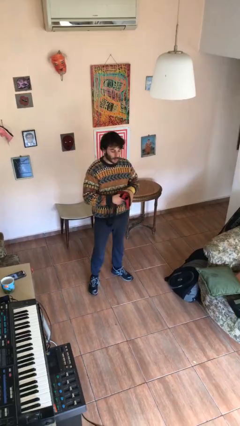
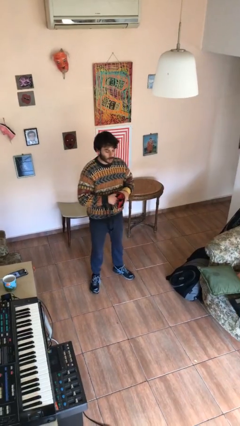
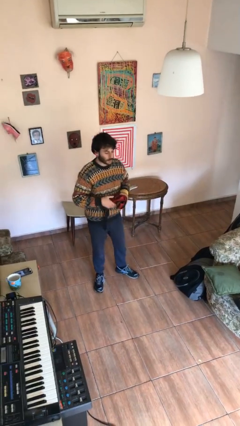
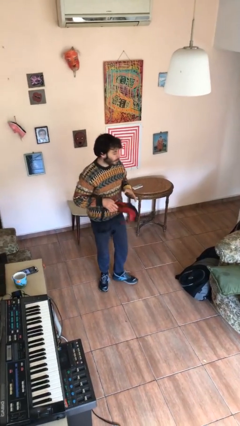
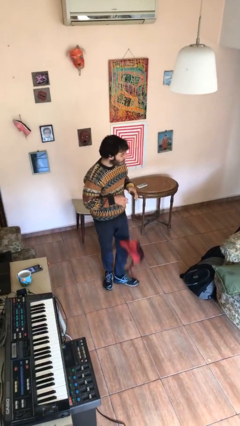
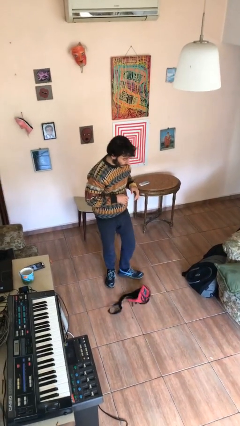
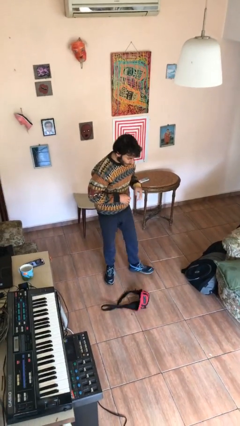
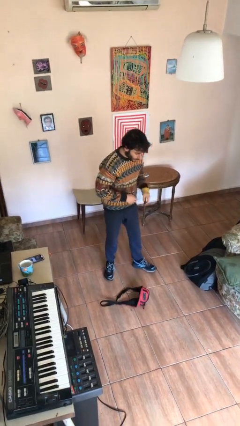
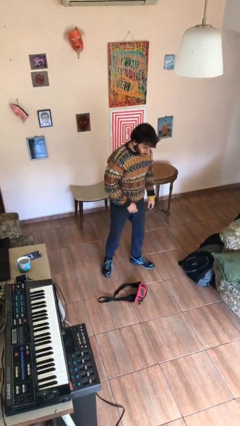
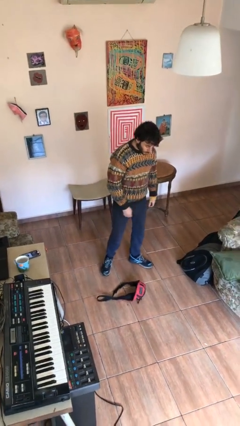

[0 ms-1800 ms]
person drops object

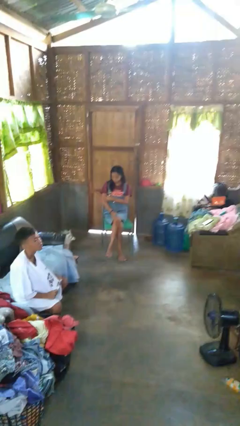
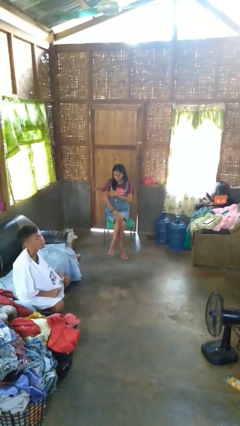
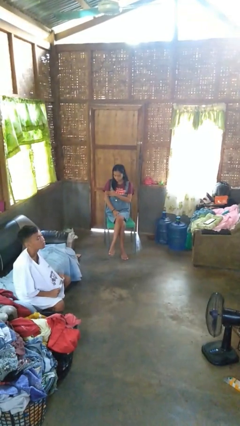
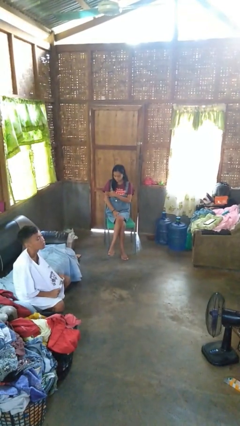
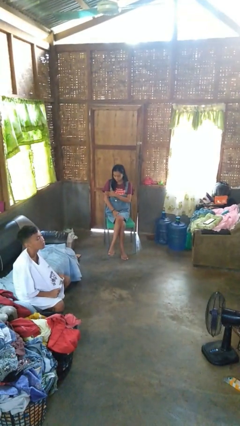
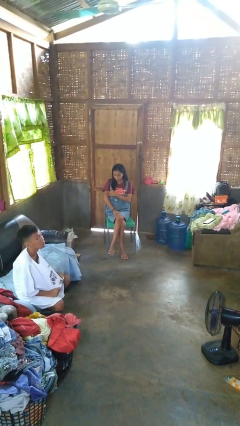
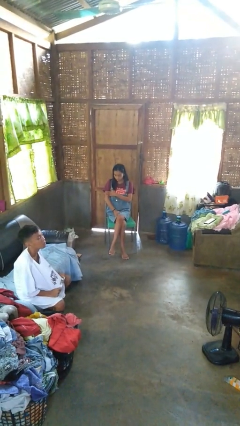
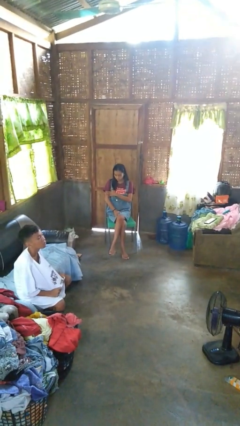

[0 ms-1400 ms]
person swats bug

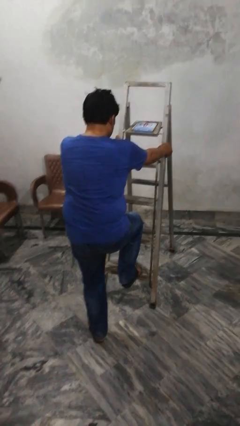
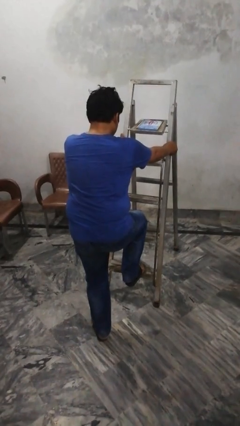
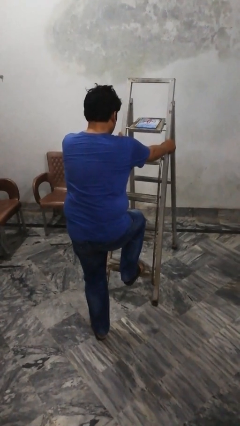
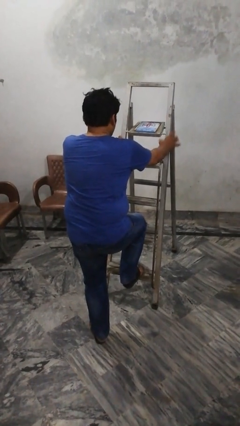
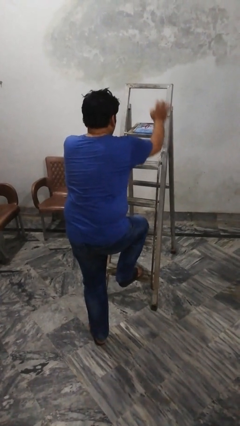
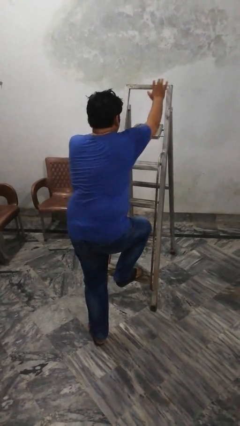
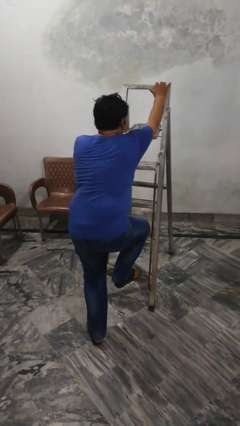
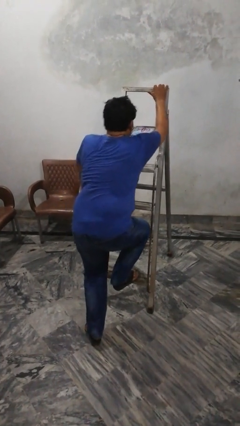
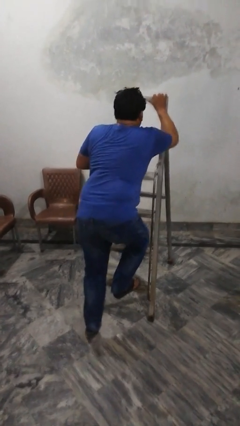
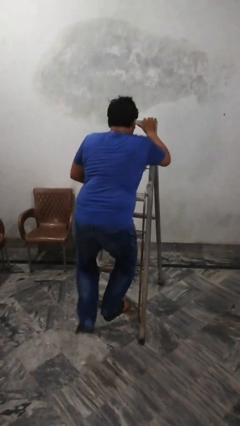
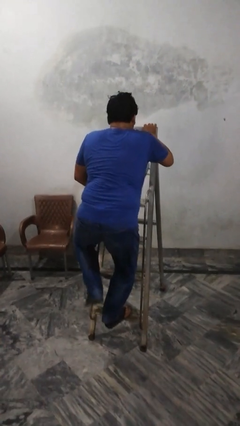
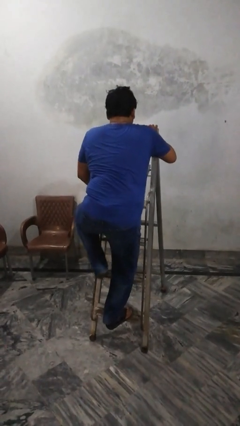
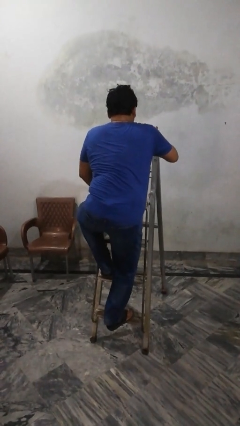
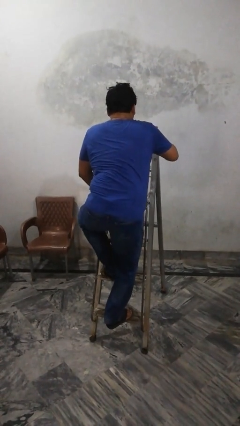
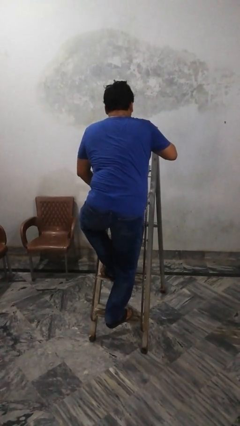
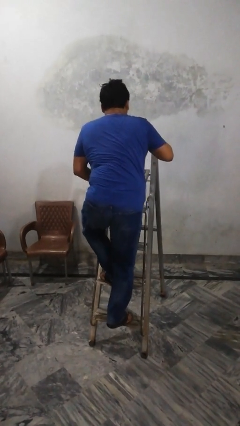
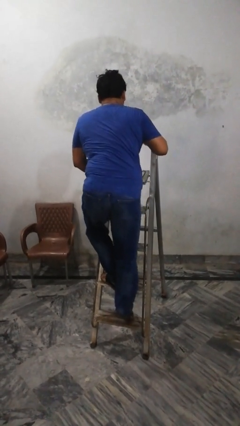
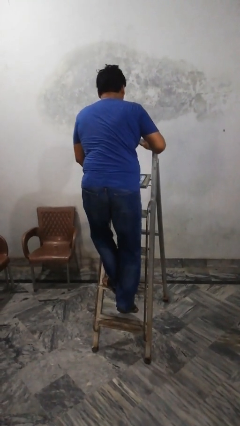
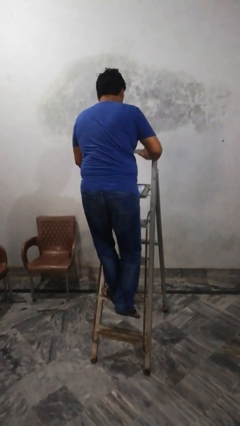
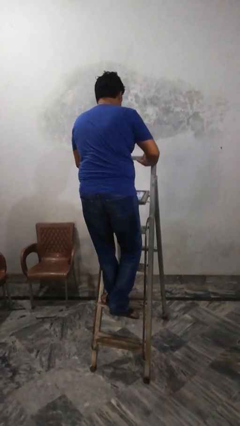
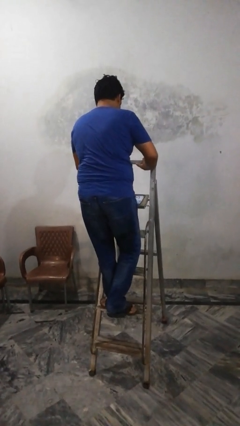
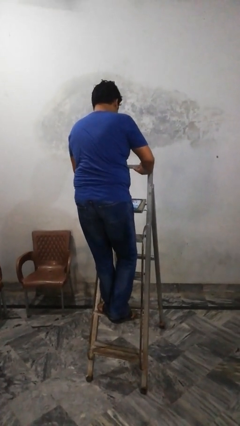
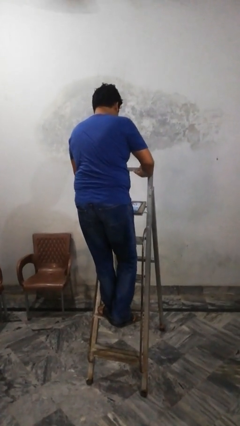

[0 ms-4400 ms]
person climbs up ladder

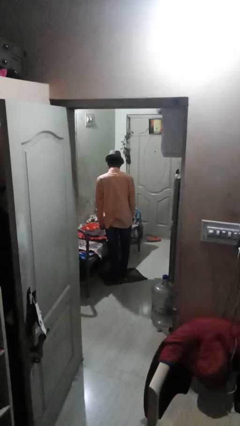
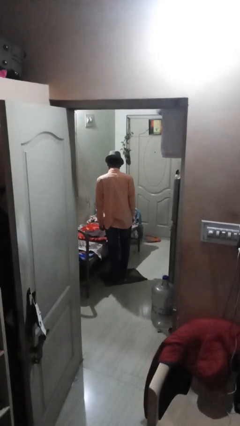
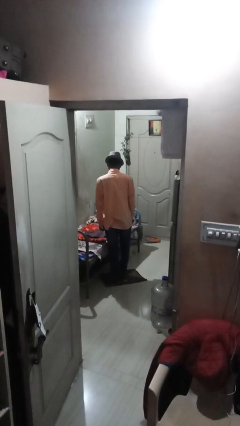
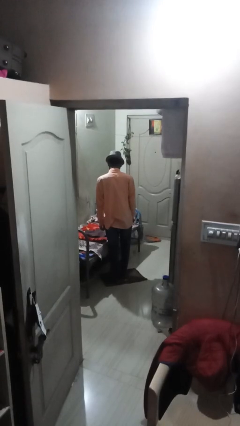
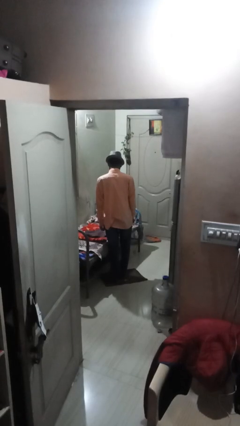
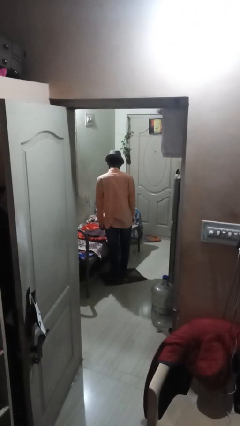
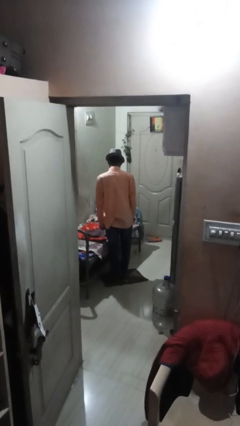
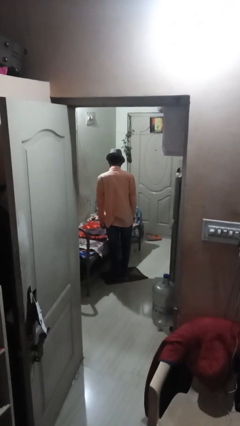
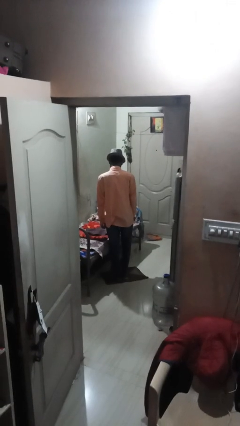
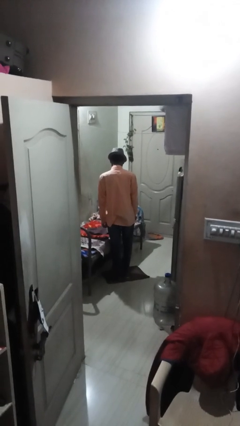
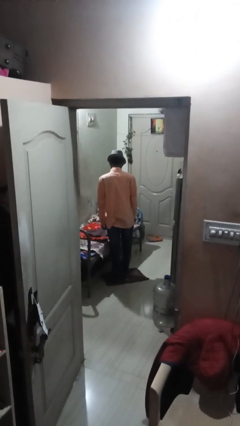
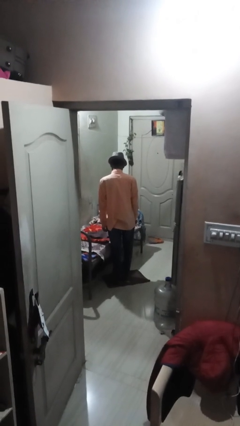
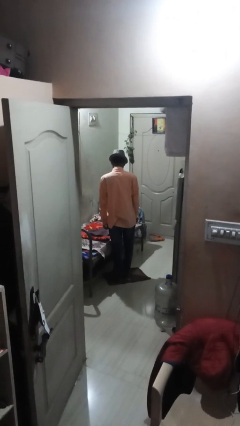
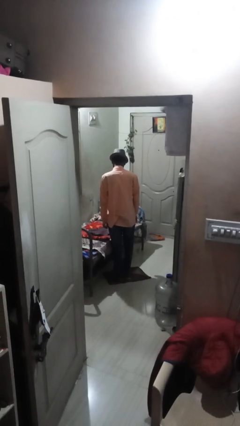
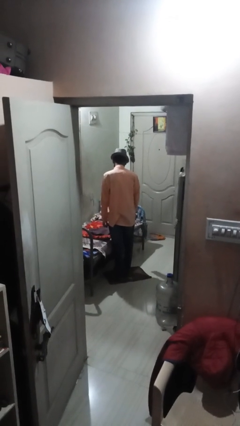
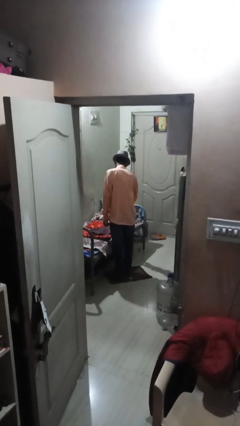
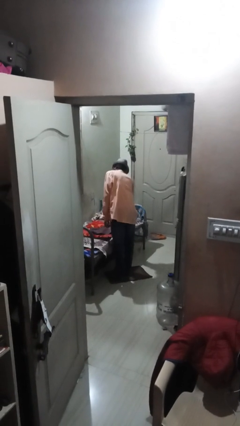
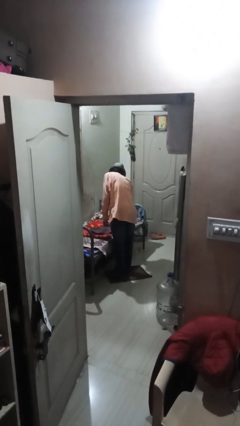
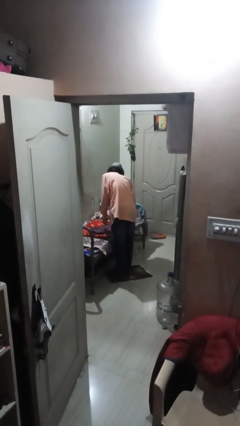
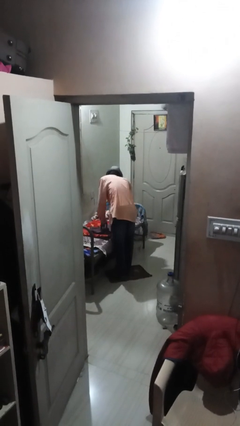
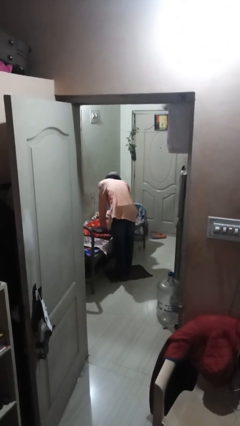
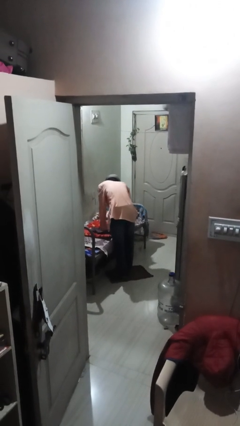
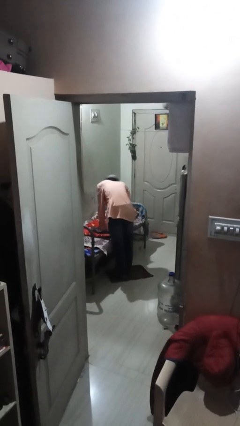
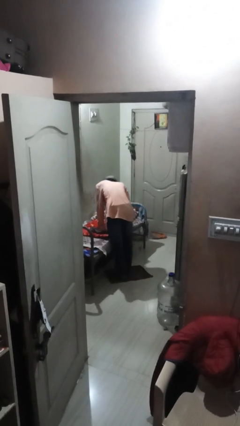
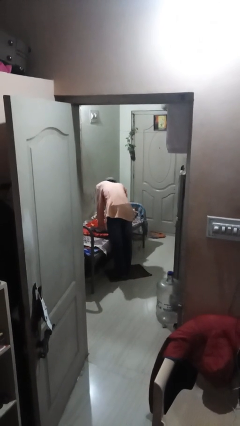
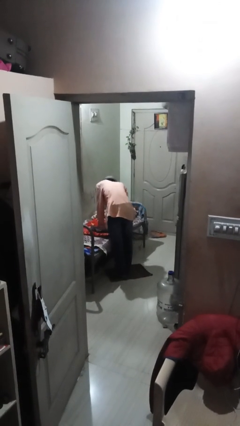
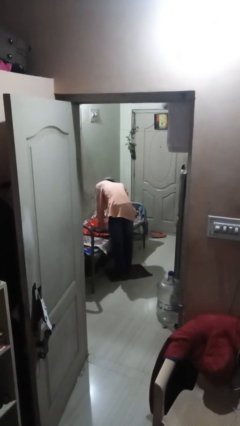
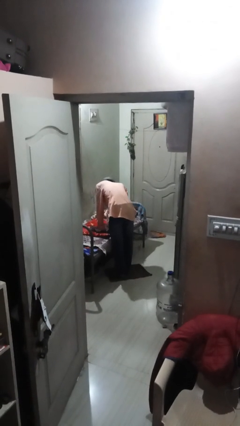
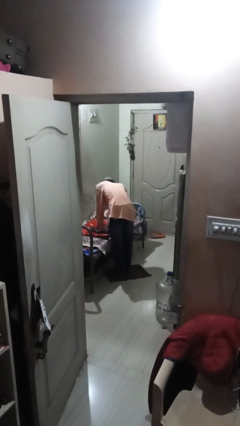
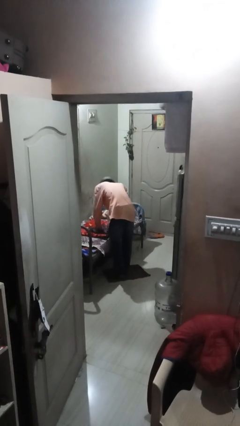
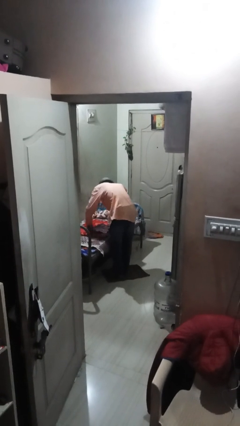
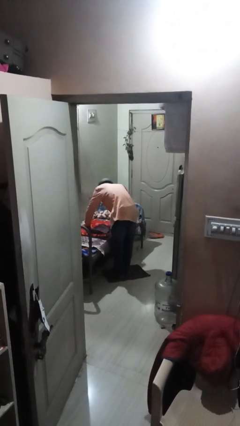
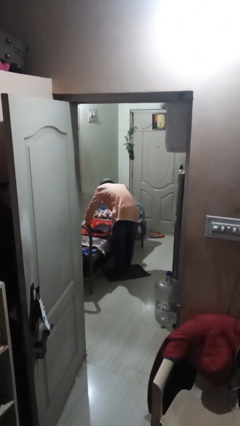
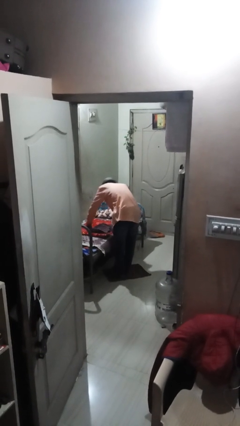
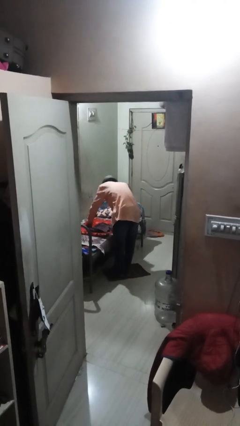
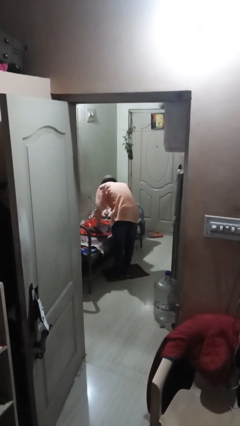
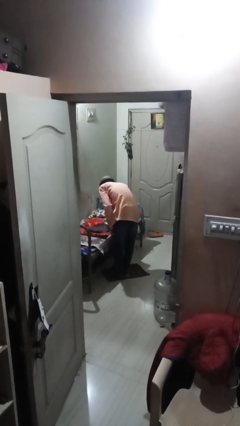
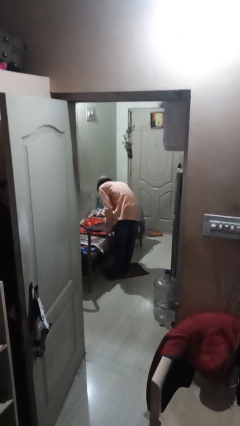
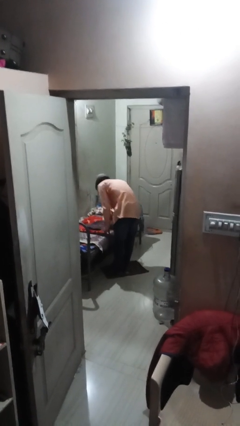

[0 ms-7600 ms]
person irons clothes

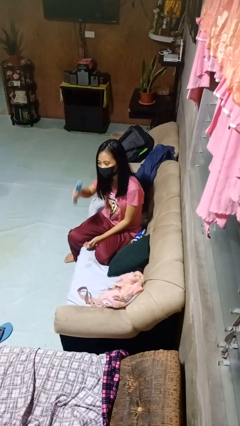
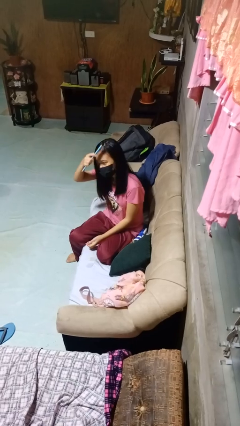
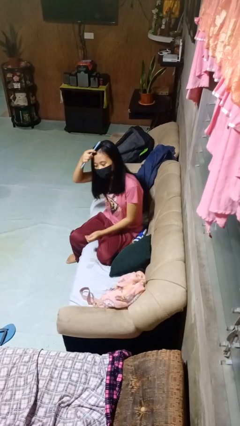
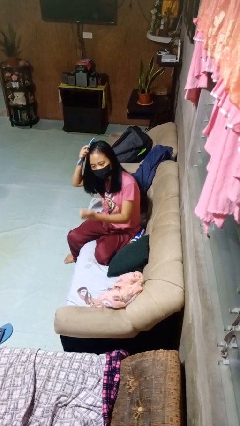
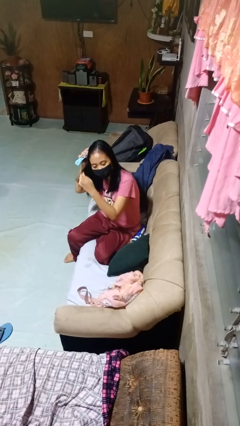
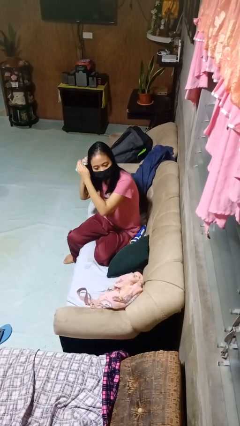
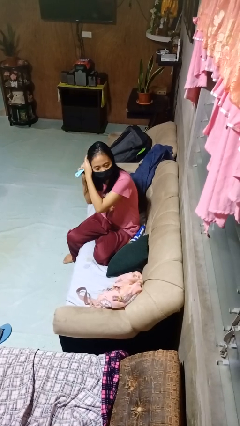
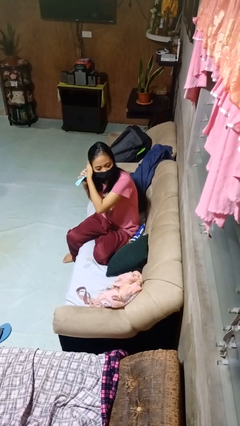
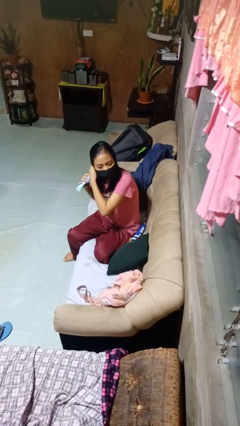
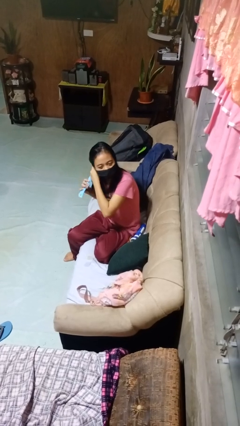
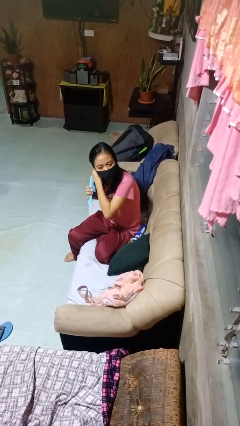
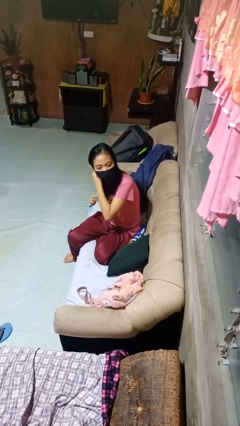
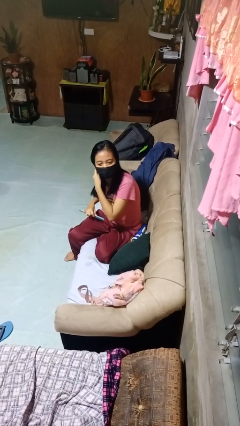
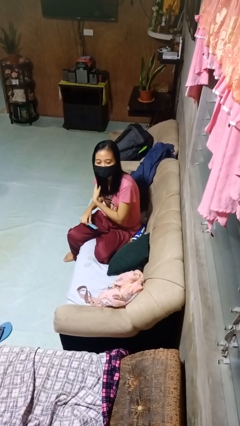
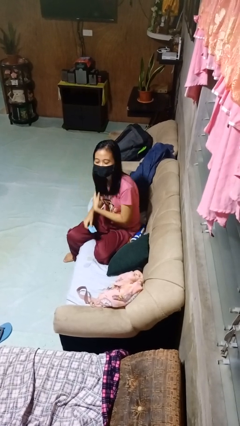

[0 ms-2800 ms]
person brushes hair
